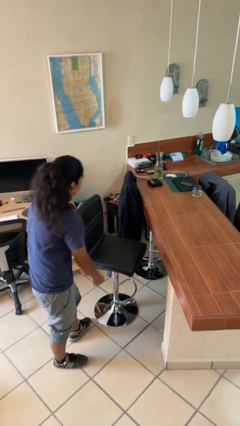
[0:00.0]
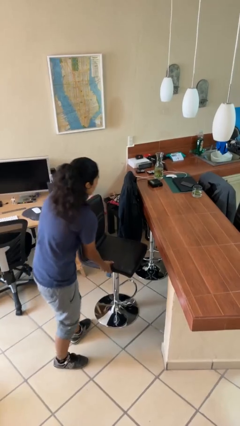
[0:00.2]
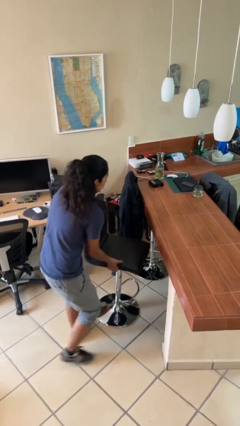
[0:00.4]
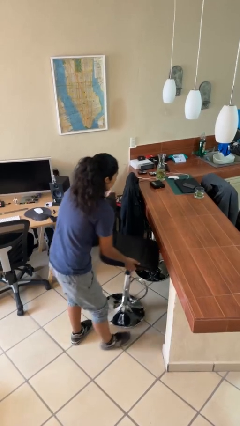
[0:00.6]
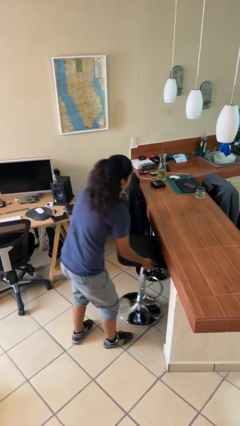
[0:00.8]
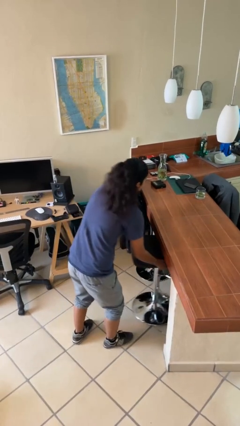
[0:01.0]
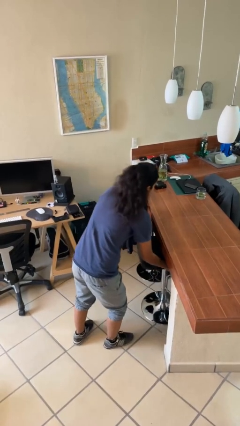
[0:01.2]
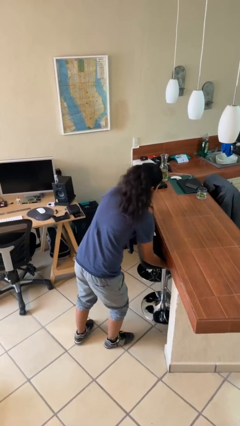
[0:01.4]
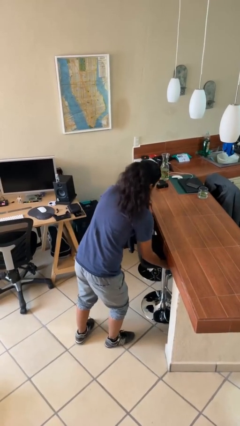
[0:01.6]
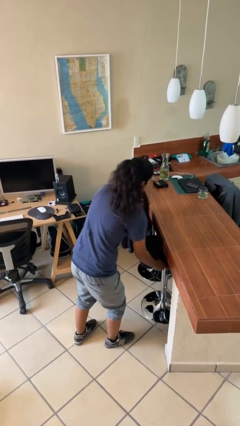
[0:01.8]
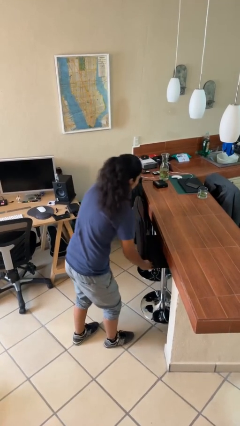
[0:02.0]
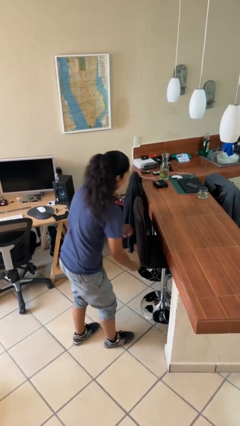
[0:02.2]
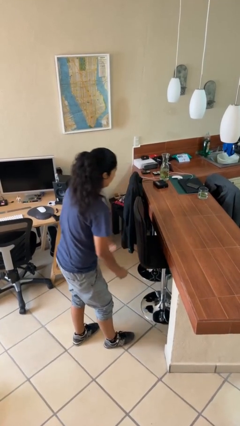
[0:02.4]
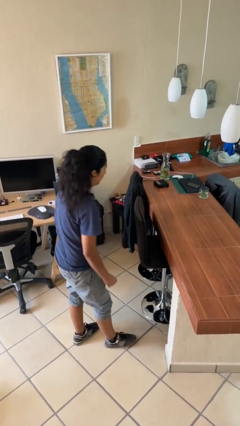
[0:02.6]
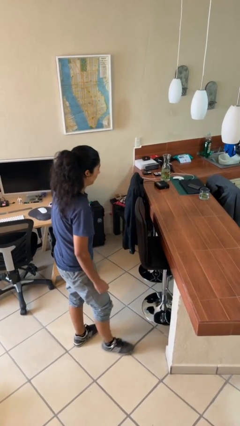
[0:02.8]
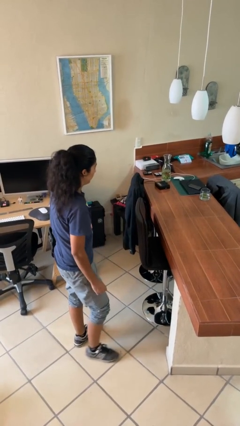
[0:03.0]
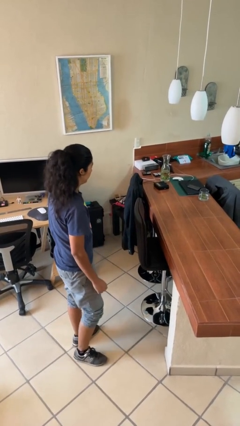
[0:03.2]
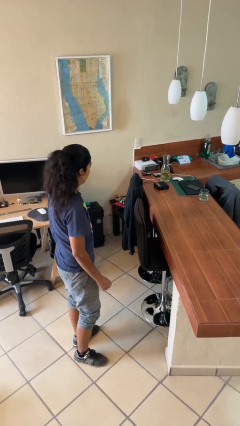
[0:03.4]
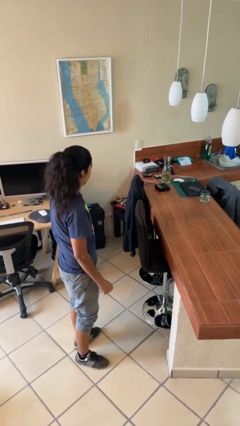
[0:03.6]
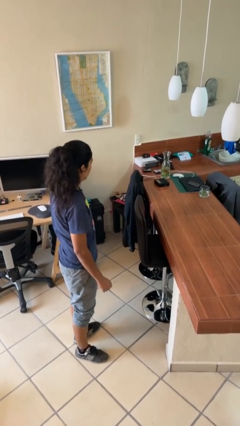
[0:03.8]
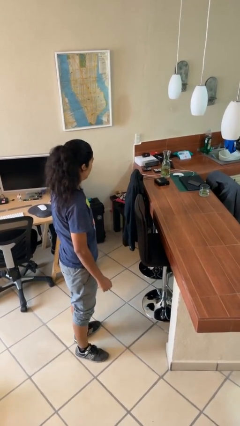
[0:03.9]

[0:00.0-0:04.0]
person pushes in chair

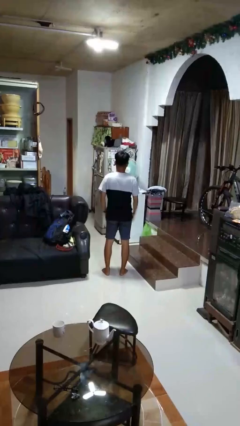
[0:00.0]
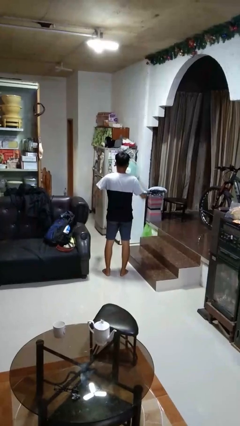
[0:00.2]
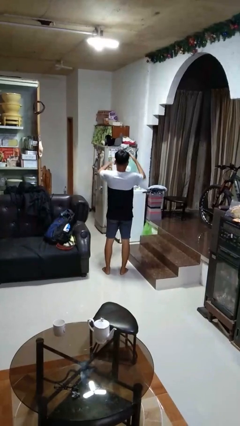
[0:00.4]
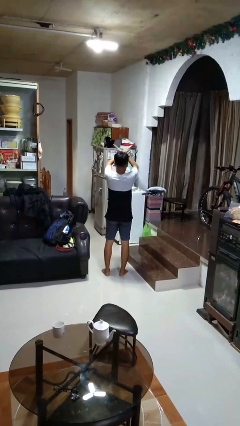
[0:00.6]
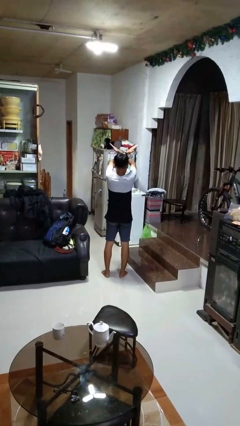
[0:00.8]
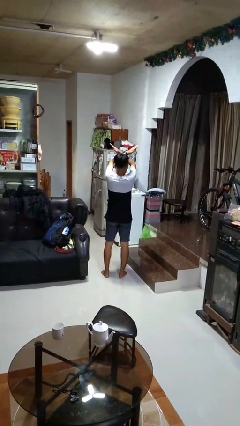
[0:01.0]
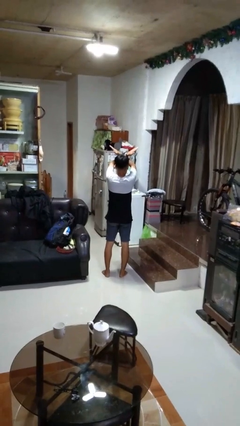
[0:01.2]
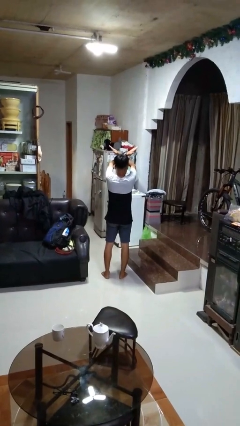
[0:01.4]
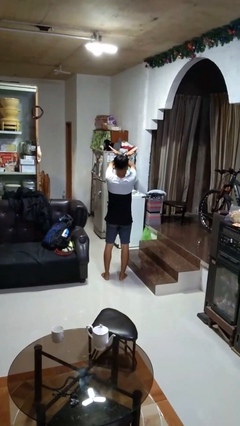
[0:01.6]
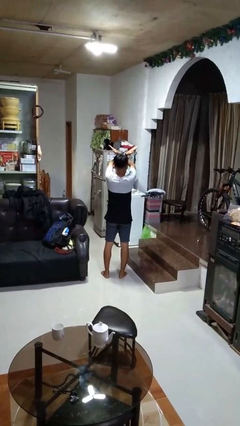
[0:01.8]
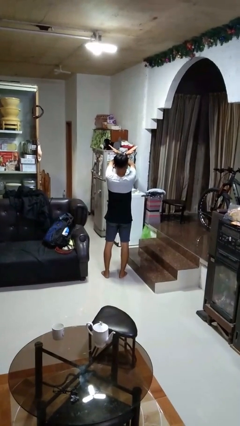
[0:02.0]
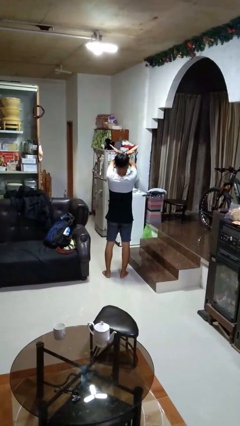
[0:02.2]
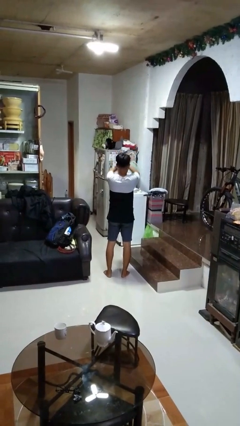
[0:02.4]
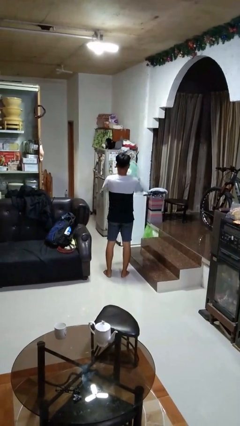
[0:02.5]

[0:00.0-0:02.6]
person gestures arms x

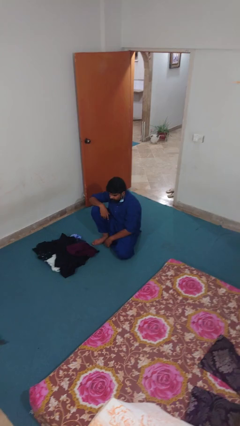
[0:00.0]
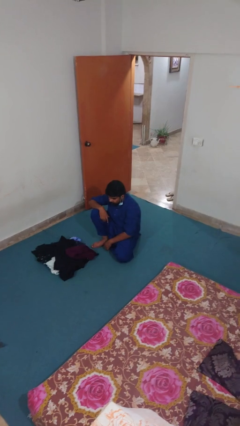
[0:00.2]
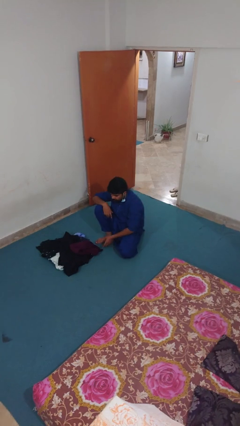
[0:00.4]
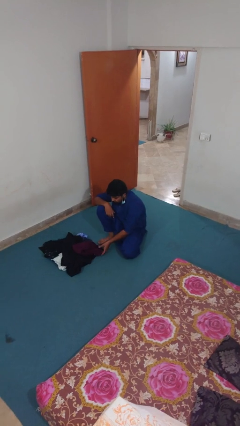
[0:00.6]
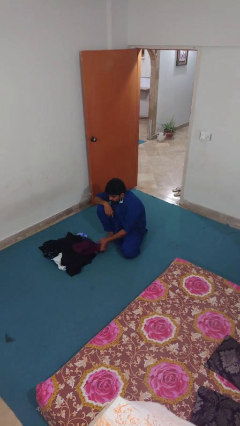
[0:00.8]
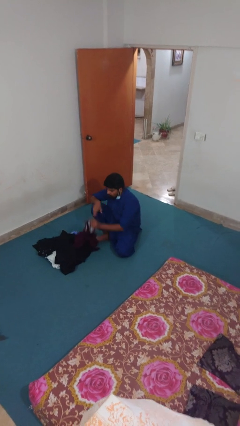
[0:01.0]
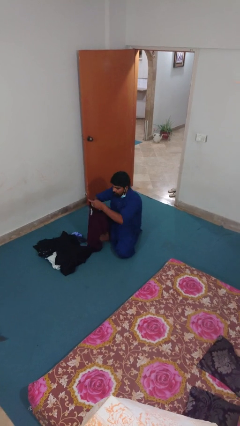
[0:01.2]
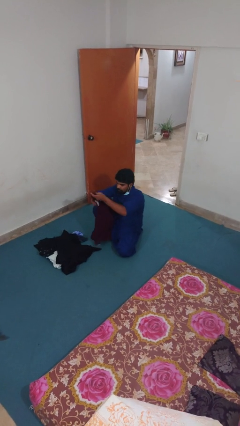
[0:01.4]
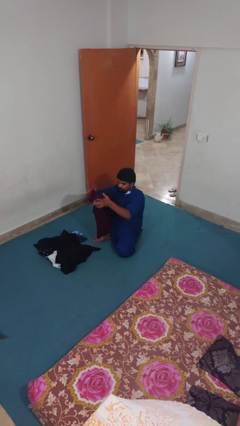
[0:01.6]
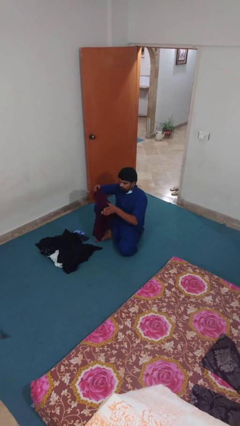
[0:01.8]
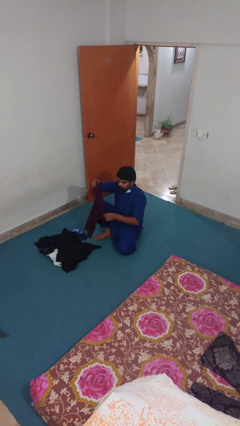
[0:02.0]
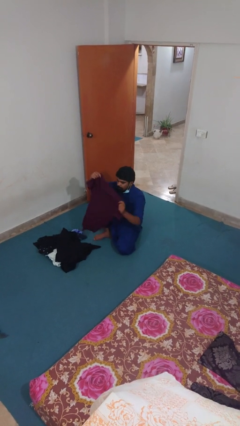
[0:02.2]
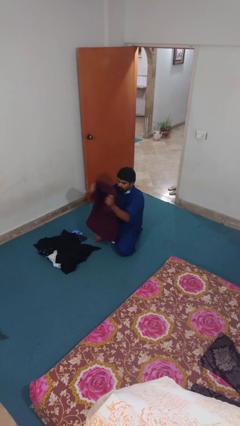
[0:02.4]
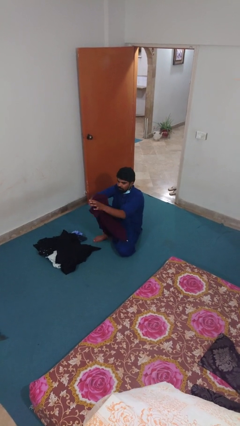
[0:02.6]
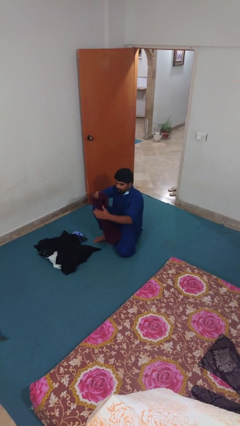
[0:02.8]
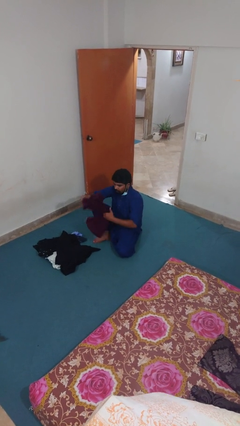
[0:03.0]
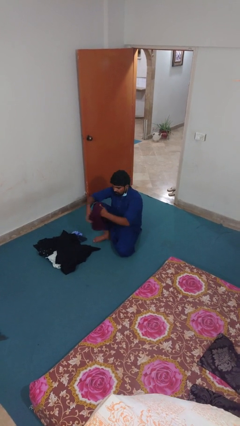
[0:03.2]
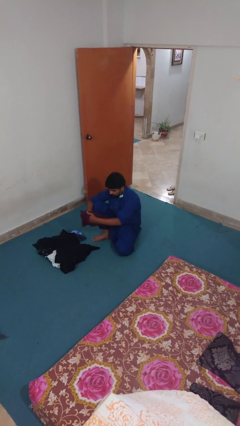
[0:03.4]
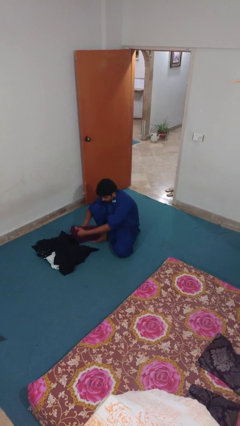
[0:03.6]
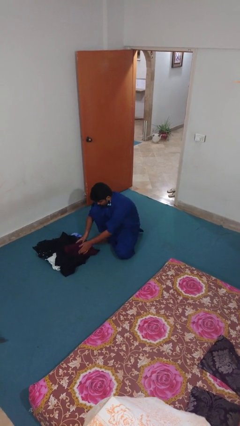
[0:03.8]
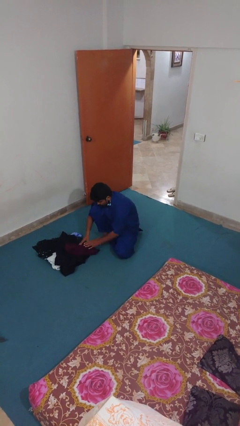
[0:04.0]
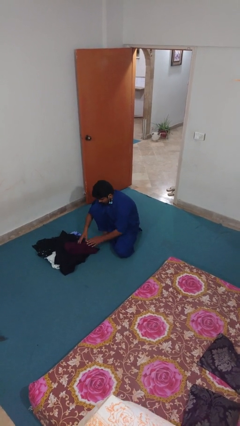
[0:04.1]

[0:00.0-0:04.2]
person folds shirt

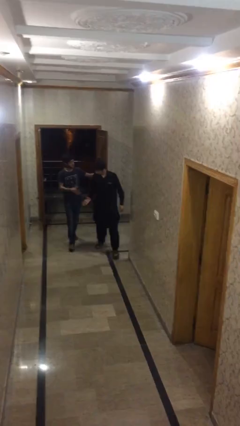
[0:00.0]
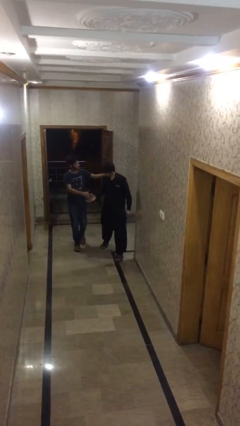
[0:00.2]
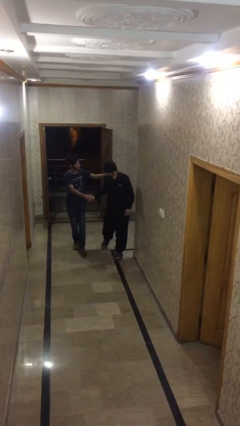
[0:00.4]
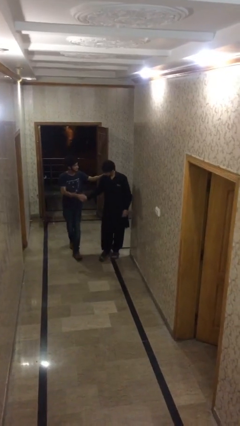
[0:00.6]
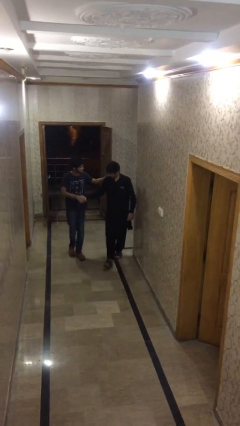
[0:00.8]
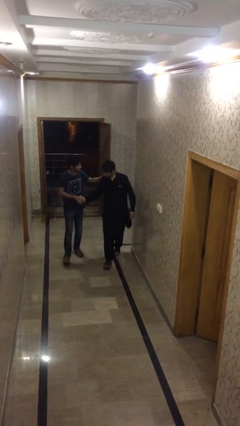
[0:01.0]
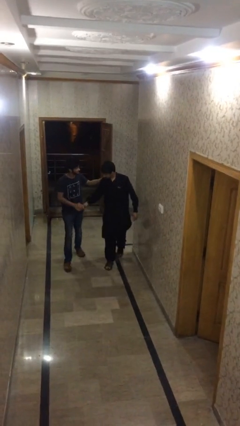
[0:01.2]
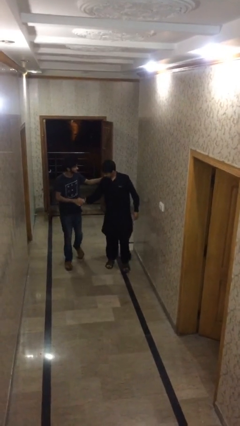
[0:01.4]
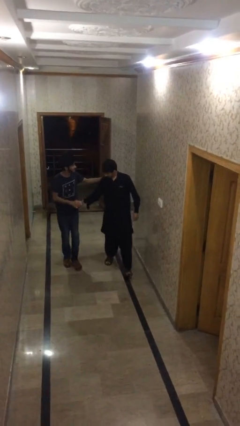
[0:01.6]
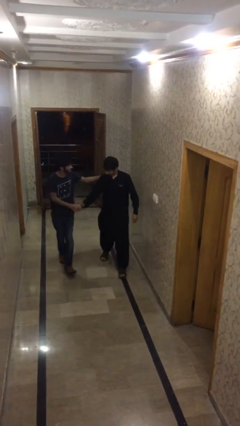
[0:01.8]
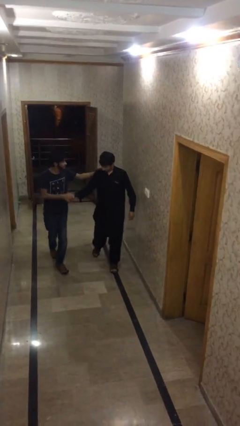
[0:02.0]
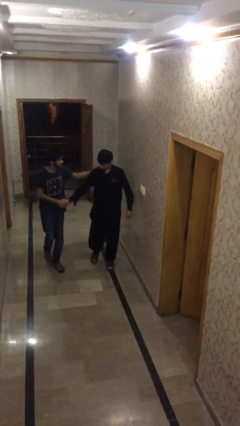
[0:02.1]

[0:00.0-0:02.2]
person shakes hand

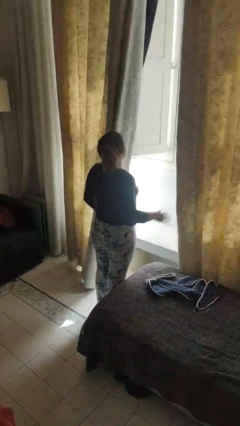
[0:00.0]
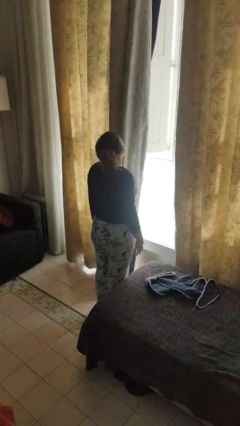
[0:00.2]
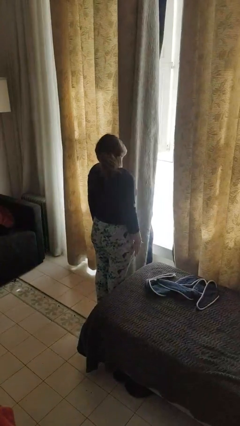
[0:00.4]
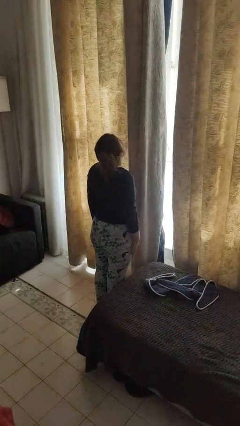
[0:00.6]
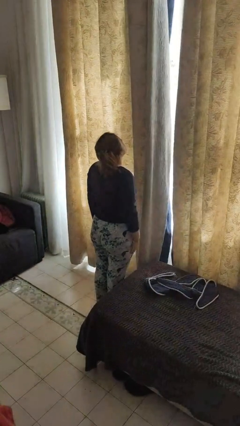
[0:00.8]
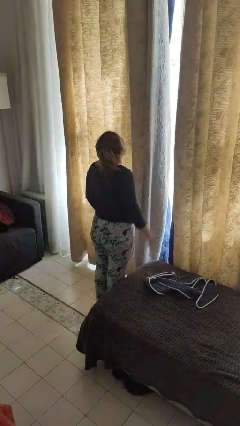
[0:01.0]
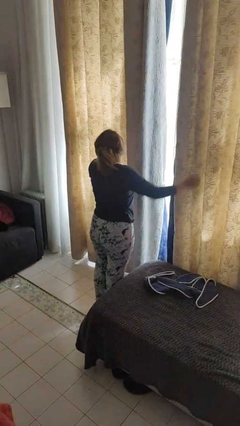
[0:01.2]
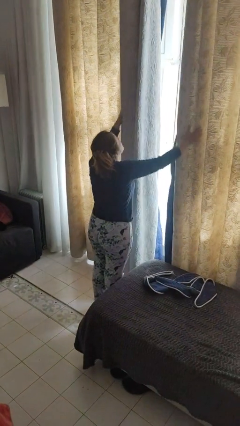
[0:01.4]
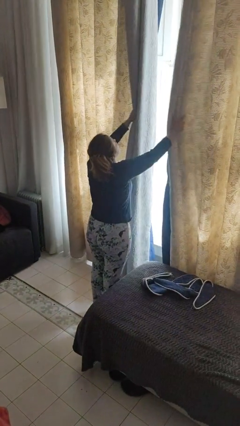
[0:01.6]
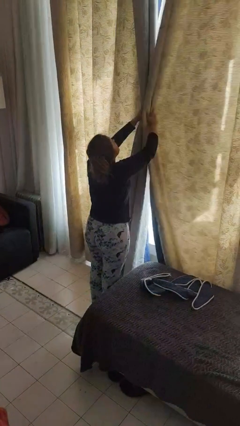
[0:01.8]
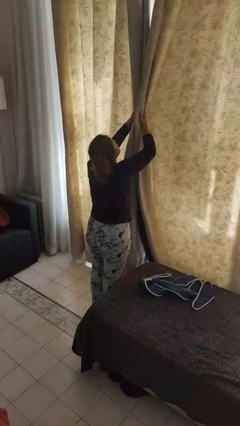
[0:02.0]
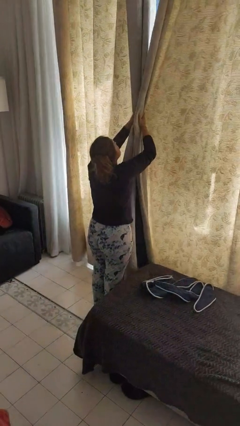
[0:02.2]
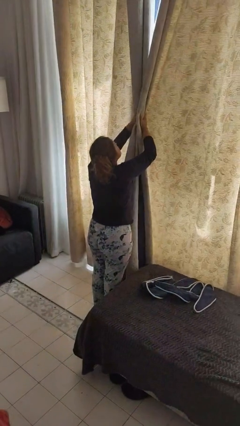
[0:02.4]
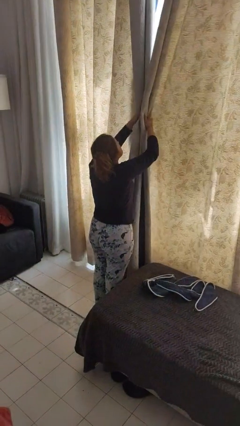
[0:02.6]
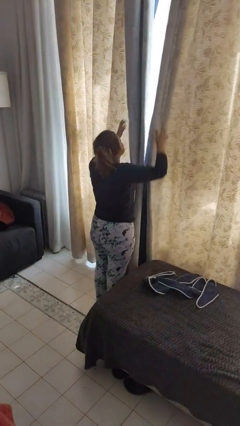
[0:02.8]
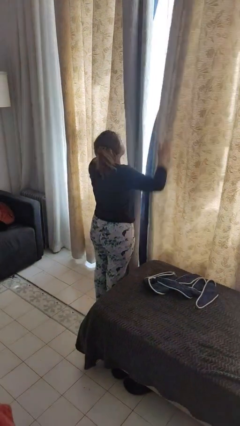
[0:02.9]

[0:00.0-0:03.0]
person closes curtains

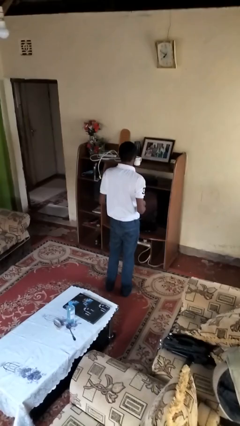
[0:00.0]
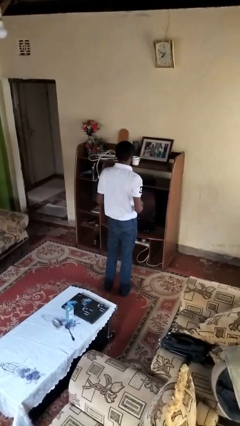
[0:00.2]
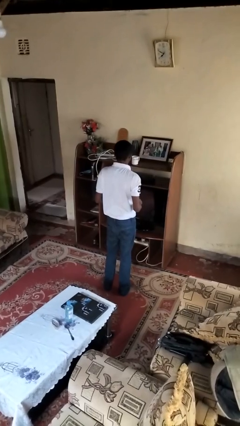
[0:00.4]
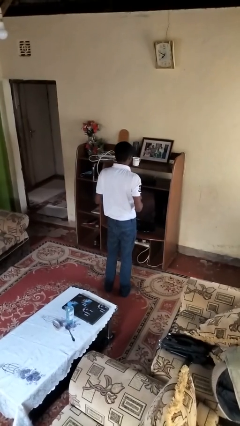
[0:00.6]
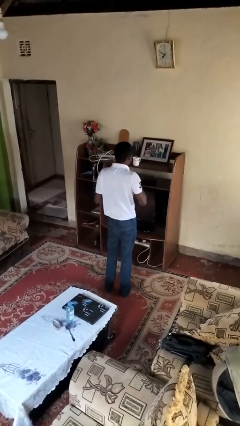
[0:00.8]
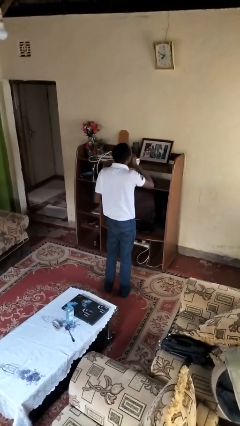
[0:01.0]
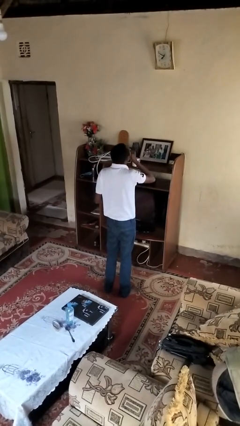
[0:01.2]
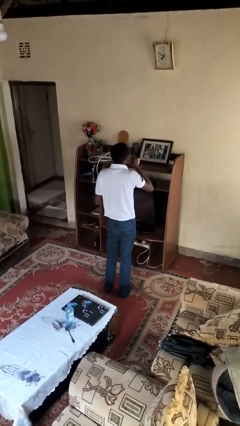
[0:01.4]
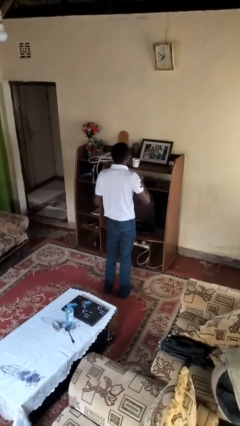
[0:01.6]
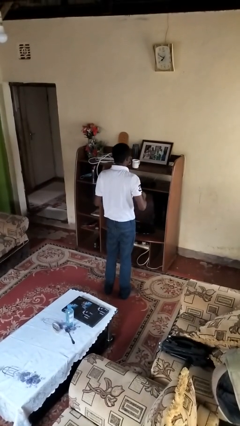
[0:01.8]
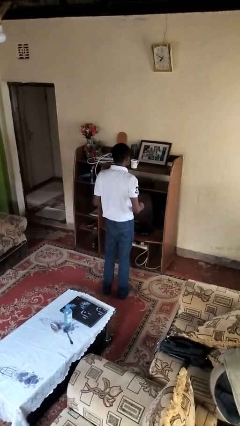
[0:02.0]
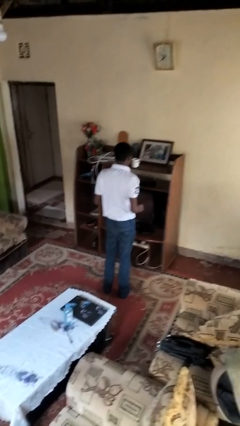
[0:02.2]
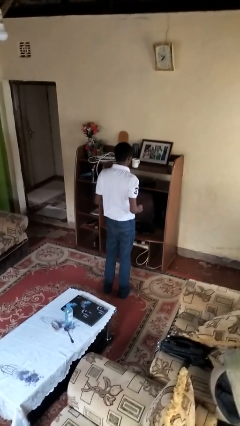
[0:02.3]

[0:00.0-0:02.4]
person takes medicine pills
